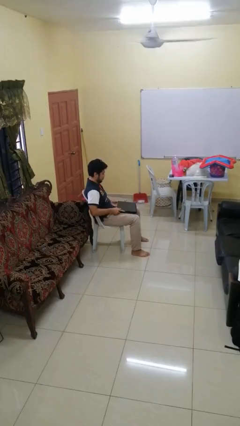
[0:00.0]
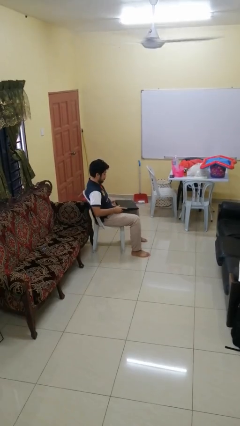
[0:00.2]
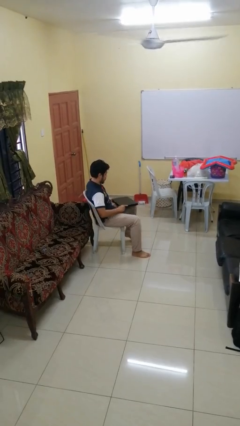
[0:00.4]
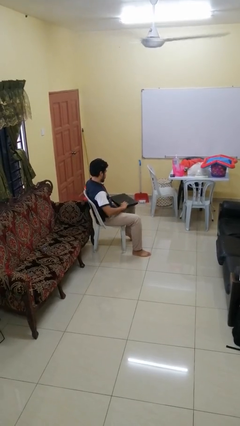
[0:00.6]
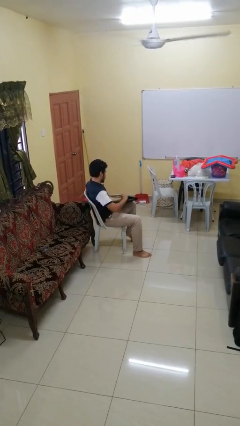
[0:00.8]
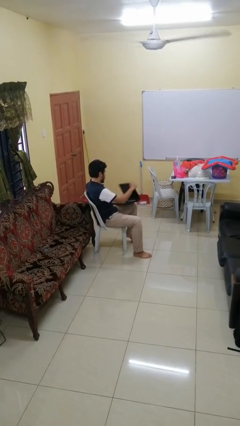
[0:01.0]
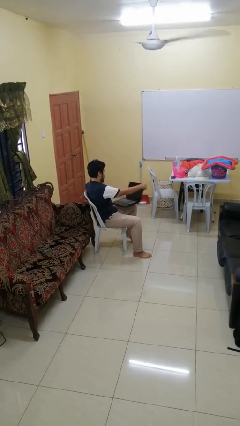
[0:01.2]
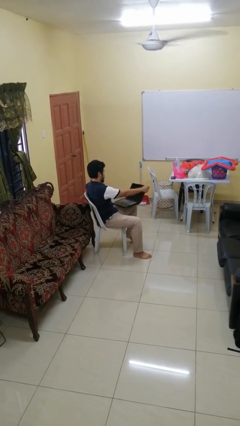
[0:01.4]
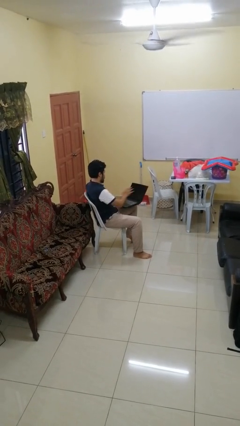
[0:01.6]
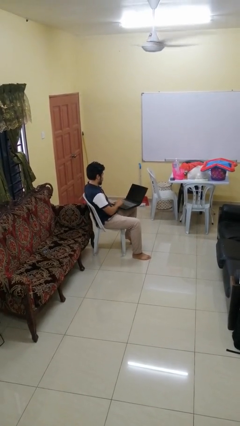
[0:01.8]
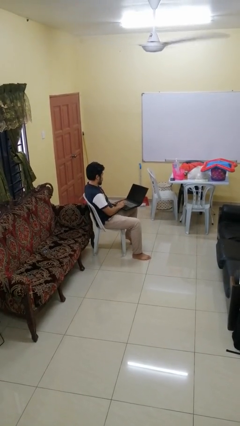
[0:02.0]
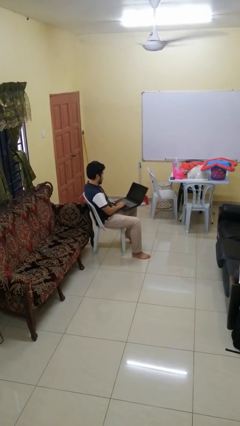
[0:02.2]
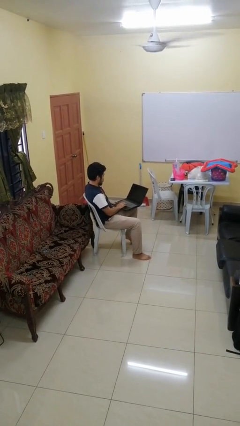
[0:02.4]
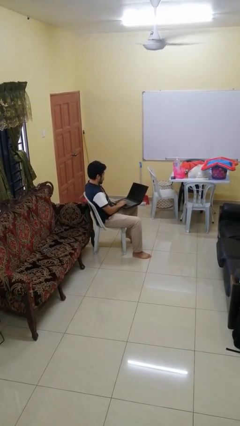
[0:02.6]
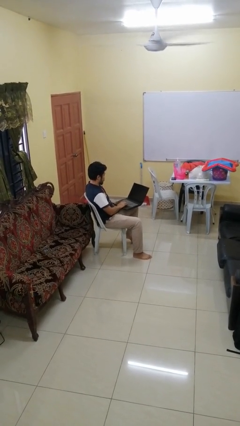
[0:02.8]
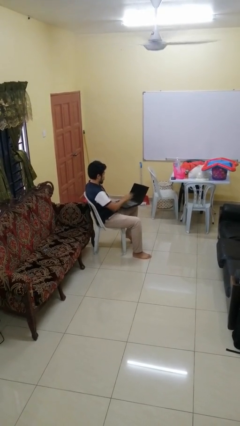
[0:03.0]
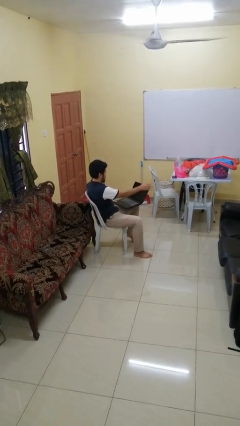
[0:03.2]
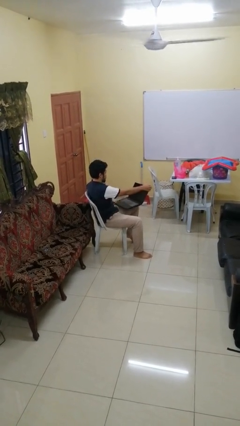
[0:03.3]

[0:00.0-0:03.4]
person opens laptop

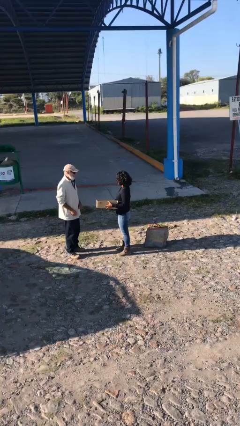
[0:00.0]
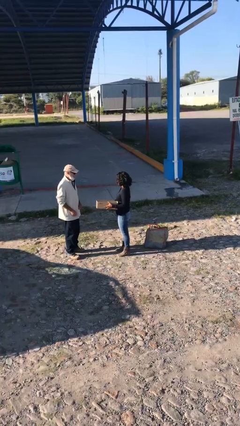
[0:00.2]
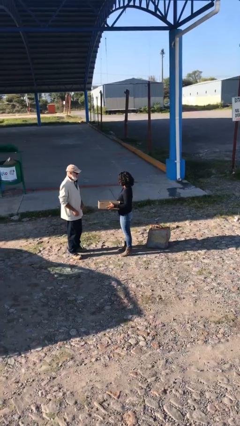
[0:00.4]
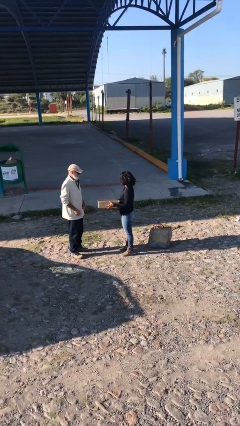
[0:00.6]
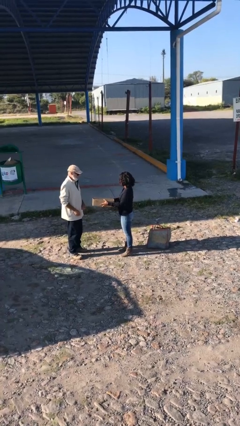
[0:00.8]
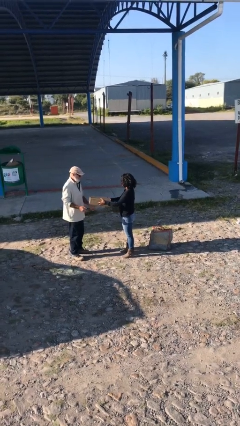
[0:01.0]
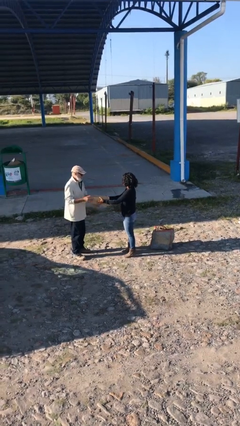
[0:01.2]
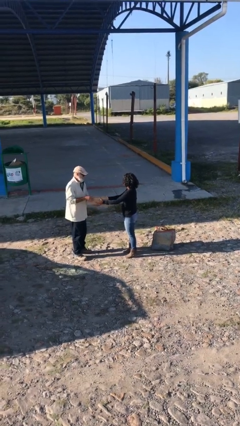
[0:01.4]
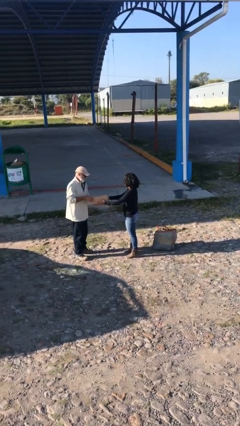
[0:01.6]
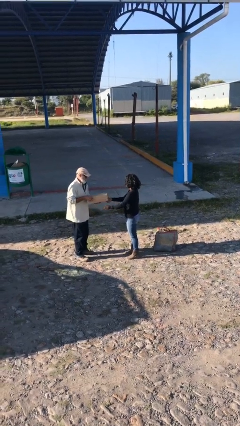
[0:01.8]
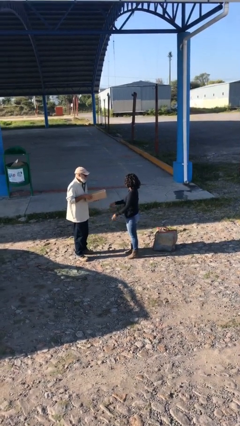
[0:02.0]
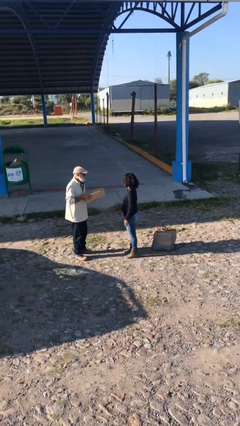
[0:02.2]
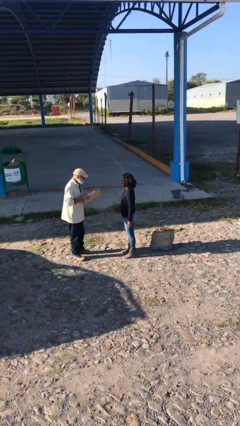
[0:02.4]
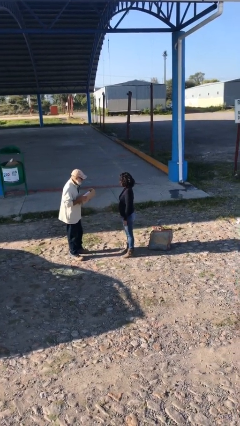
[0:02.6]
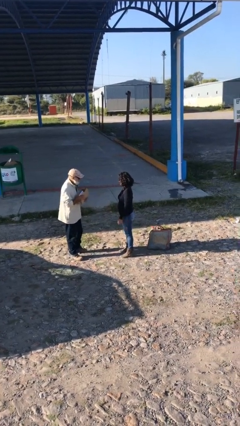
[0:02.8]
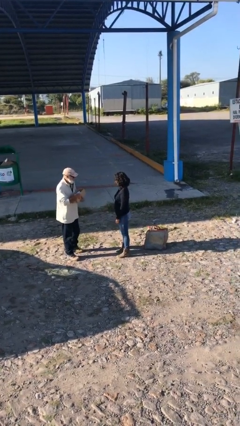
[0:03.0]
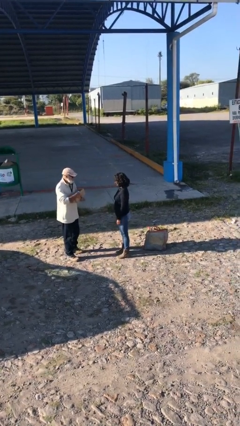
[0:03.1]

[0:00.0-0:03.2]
person transfers object to person

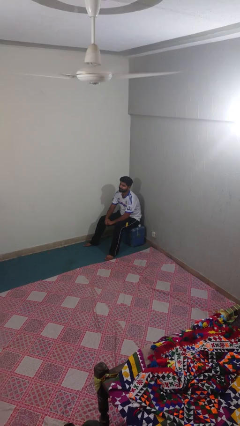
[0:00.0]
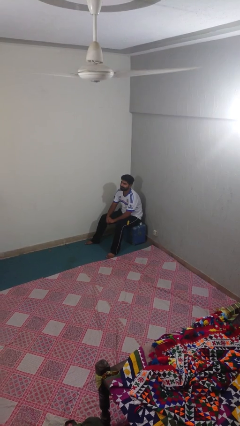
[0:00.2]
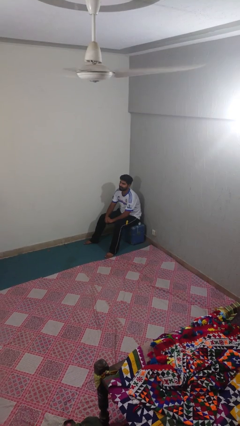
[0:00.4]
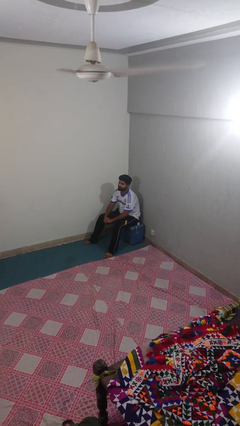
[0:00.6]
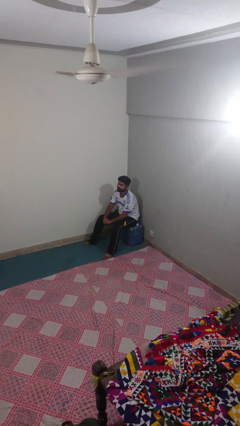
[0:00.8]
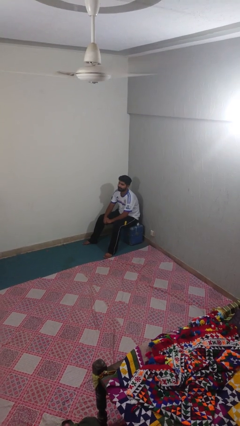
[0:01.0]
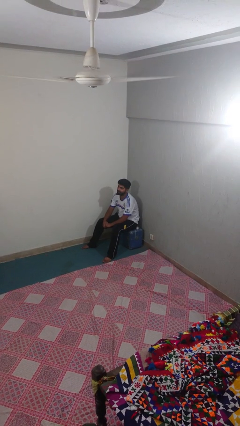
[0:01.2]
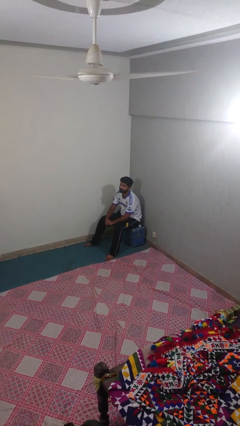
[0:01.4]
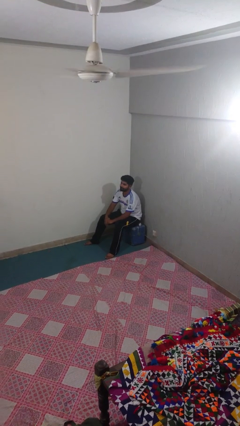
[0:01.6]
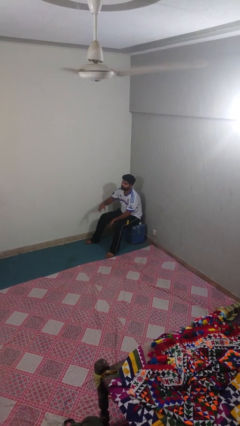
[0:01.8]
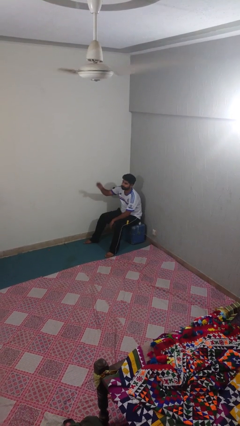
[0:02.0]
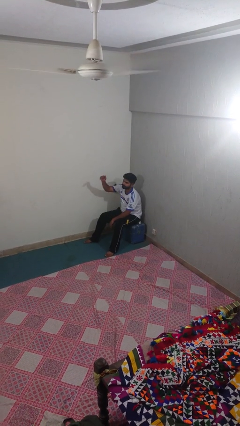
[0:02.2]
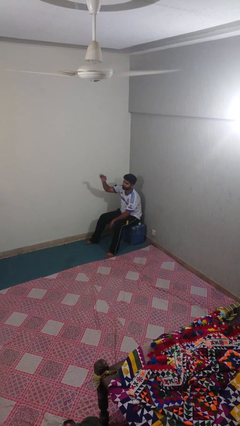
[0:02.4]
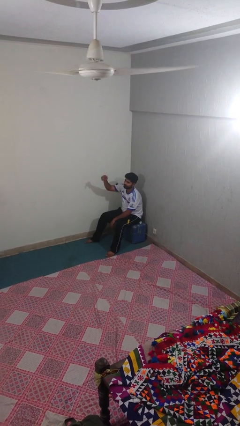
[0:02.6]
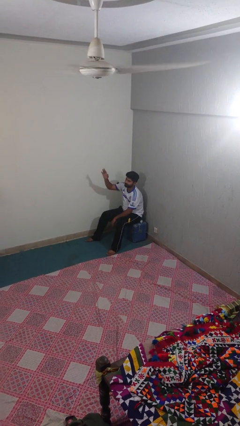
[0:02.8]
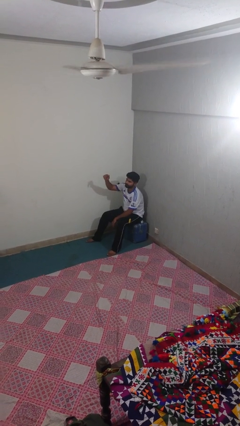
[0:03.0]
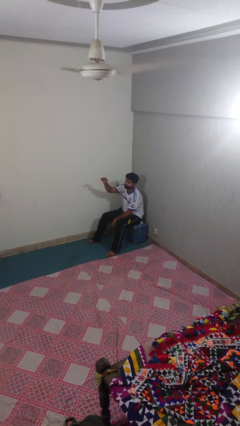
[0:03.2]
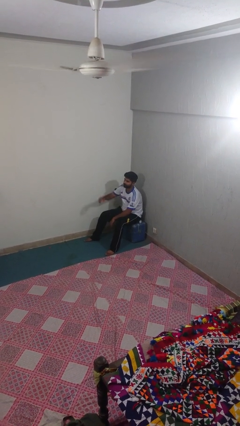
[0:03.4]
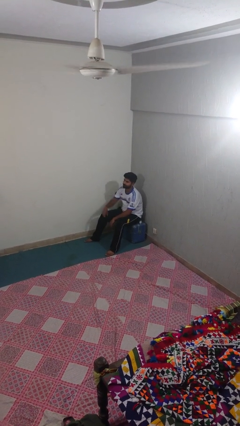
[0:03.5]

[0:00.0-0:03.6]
person gestures come here

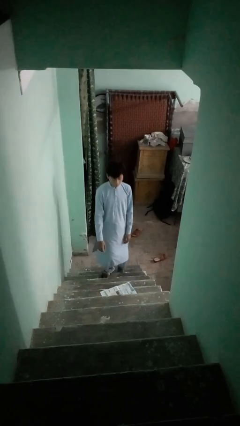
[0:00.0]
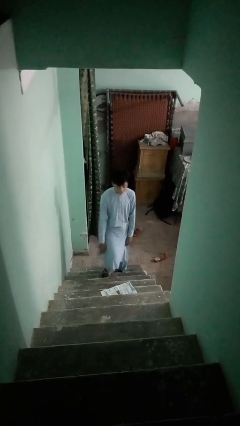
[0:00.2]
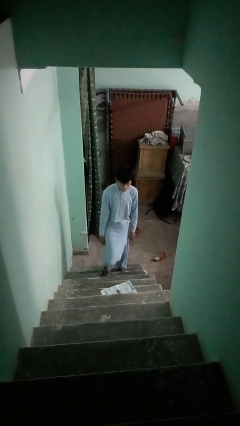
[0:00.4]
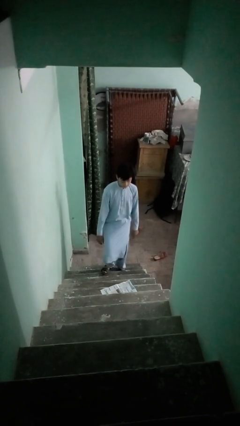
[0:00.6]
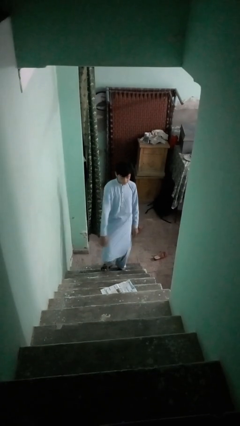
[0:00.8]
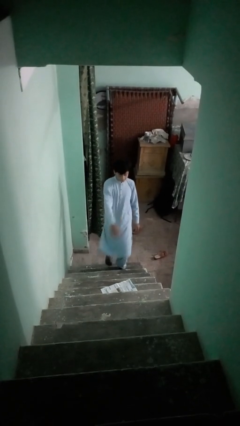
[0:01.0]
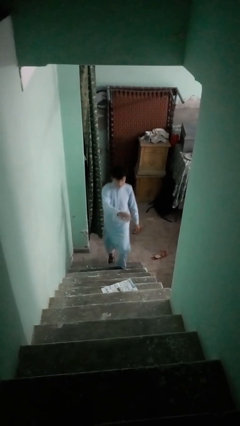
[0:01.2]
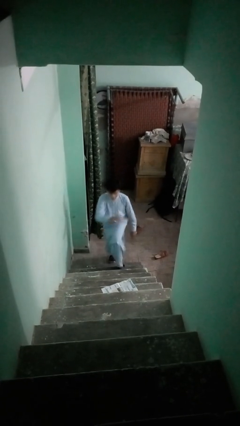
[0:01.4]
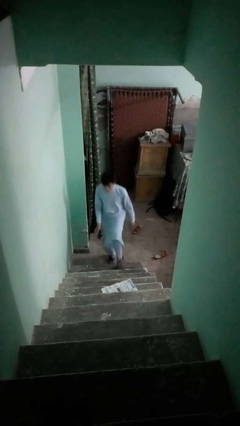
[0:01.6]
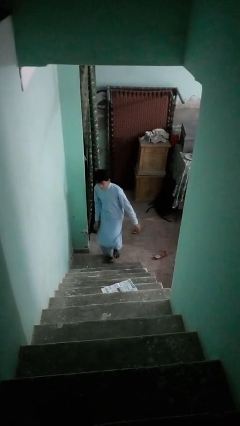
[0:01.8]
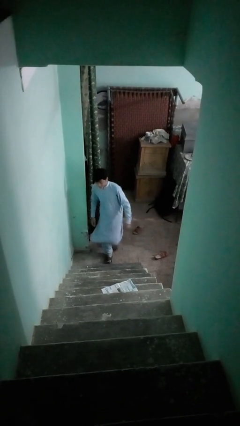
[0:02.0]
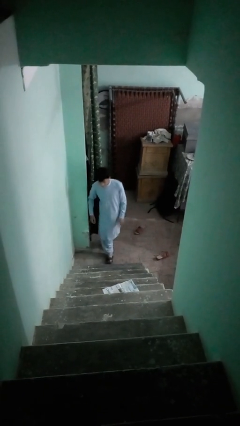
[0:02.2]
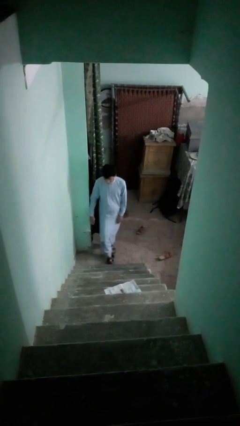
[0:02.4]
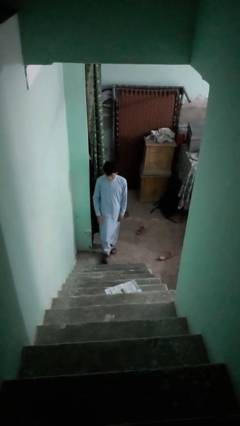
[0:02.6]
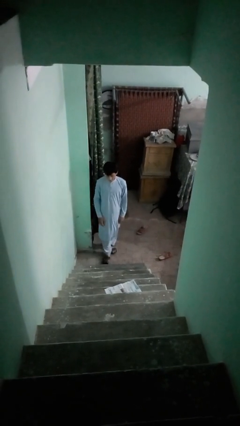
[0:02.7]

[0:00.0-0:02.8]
person climbs down stairs

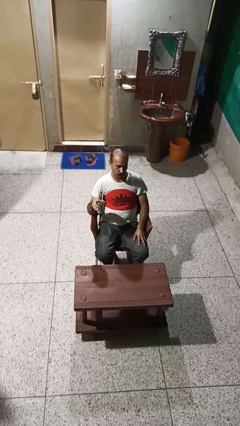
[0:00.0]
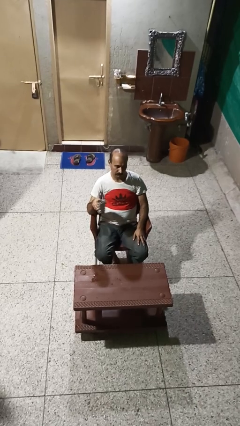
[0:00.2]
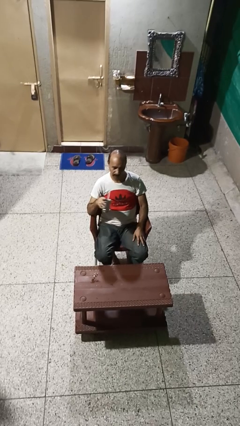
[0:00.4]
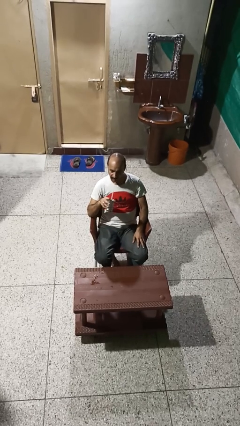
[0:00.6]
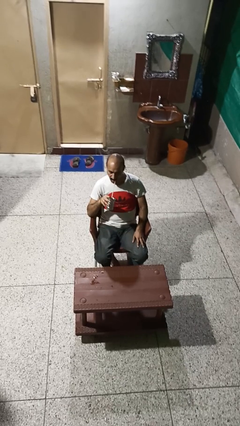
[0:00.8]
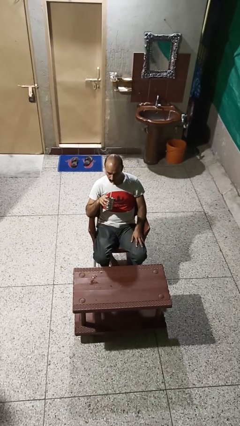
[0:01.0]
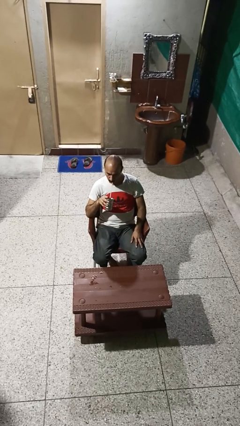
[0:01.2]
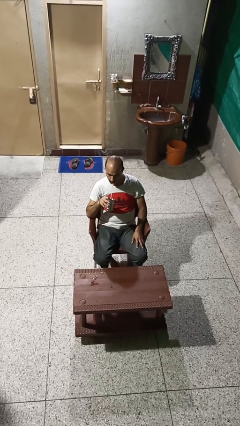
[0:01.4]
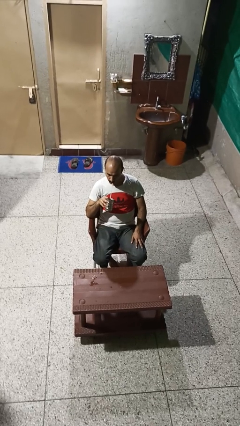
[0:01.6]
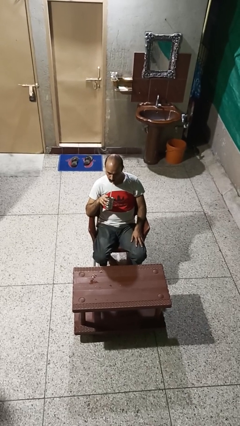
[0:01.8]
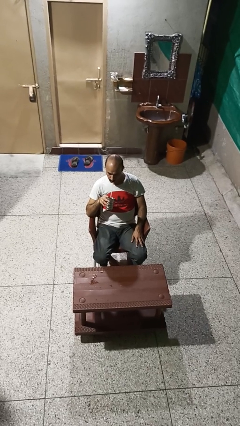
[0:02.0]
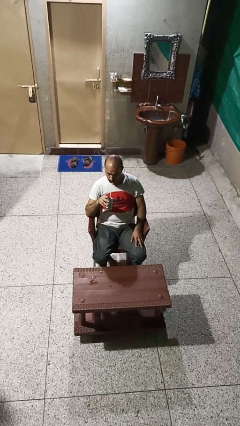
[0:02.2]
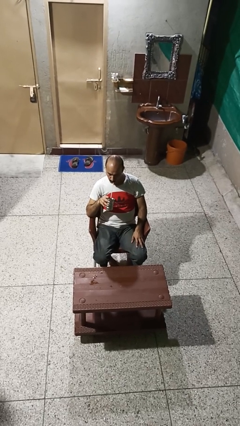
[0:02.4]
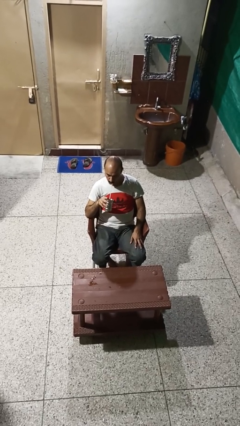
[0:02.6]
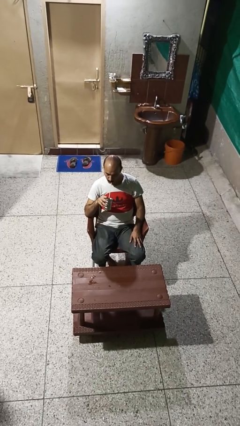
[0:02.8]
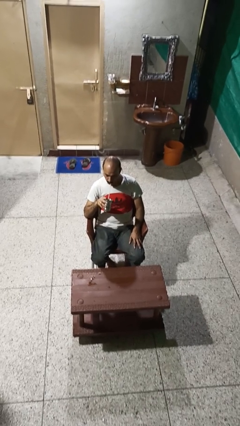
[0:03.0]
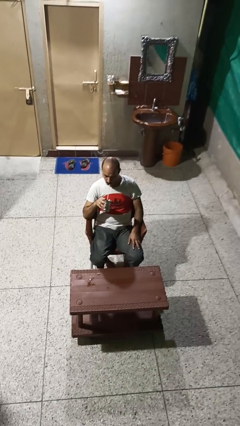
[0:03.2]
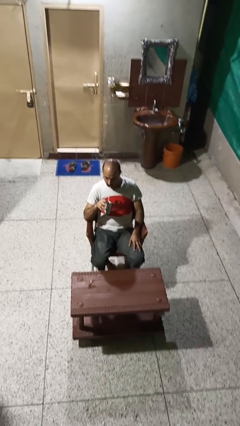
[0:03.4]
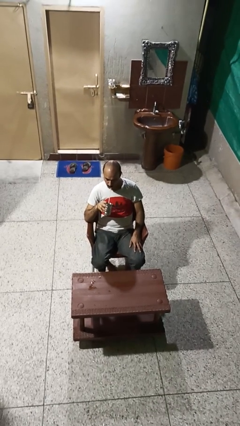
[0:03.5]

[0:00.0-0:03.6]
person drinks from straw

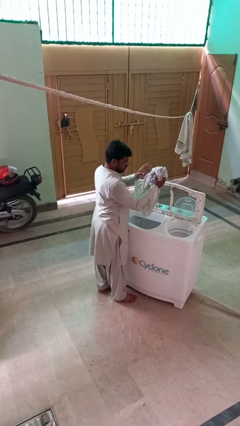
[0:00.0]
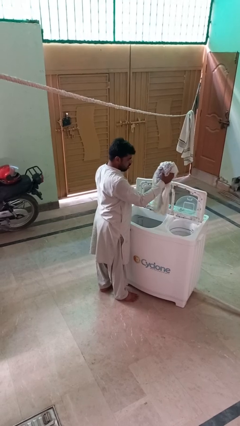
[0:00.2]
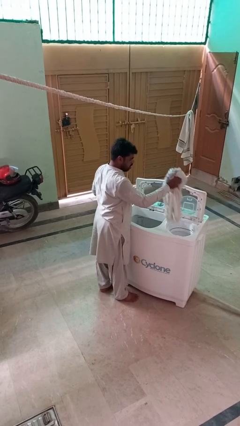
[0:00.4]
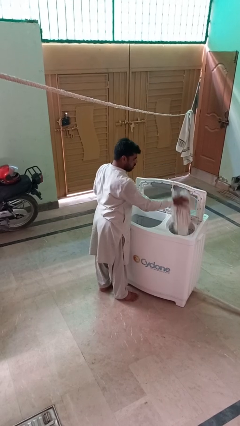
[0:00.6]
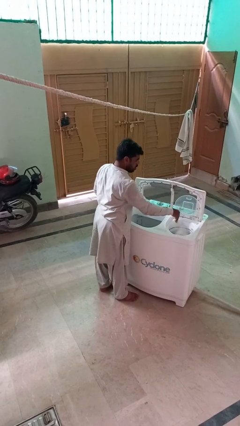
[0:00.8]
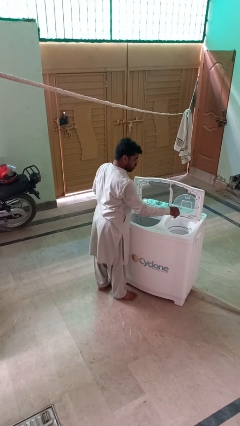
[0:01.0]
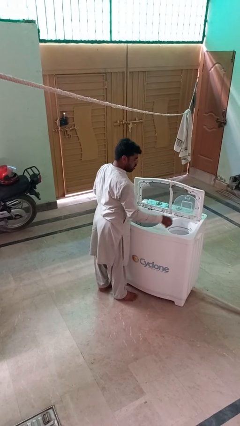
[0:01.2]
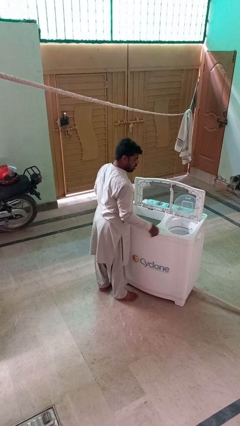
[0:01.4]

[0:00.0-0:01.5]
person loads dryer
